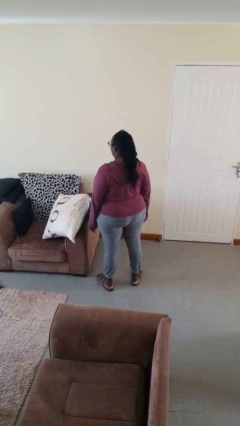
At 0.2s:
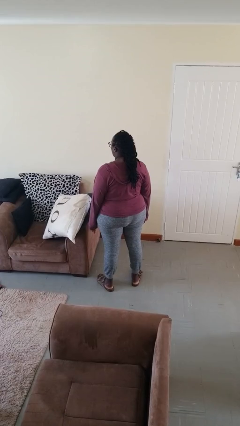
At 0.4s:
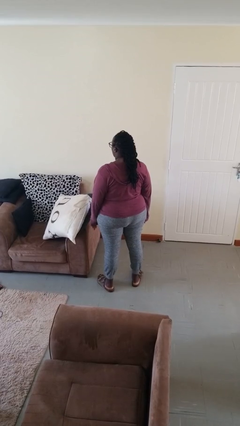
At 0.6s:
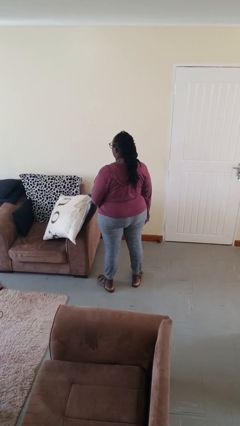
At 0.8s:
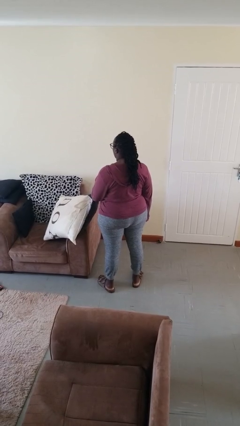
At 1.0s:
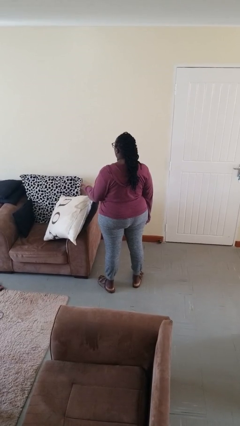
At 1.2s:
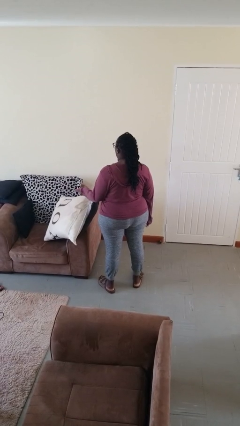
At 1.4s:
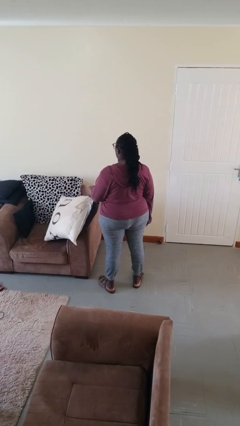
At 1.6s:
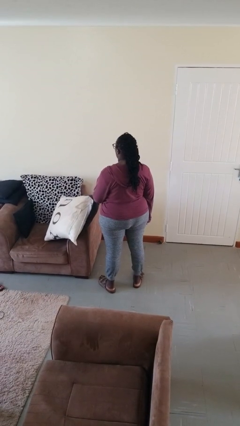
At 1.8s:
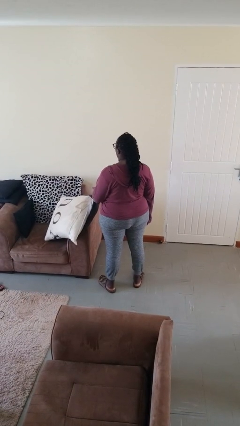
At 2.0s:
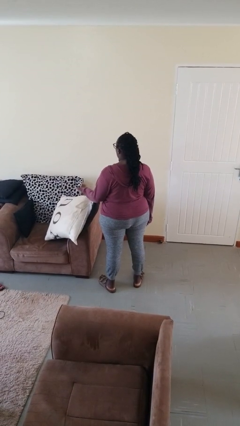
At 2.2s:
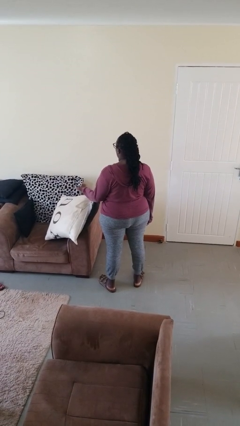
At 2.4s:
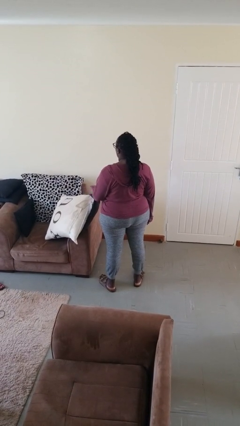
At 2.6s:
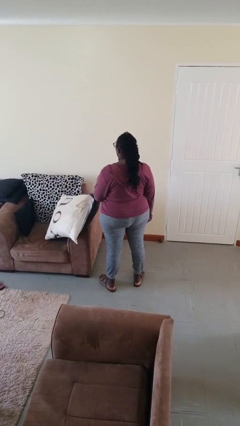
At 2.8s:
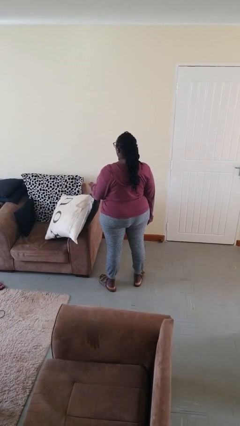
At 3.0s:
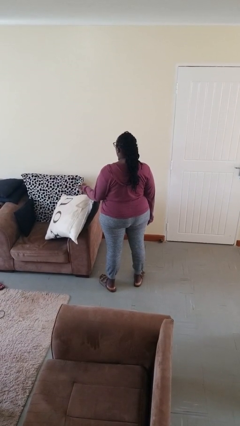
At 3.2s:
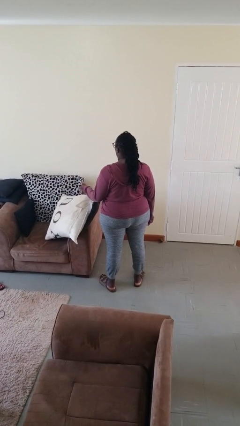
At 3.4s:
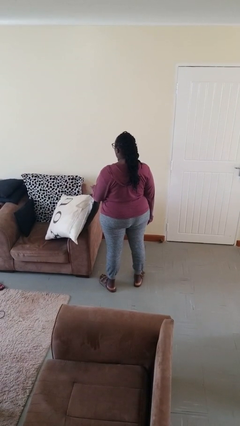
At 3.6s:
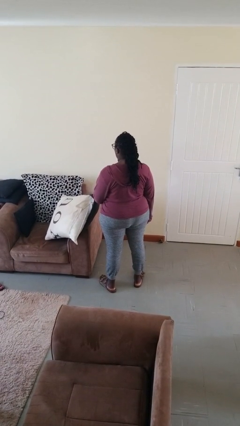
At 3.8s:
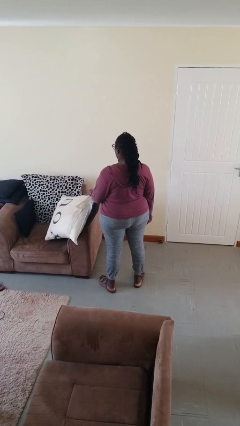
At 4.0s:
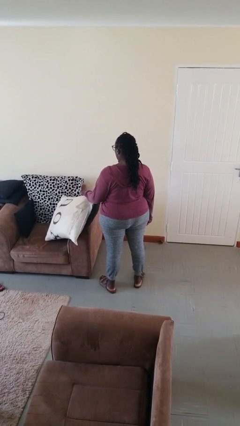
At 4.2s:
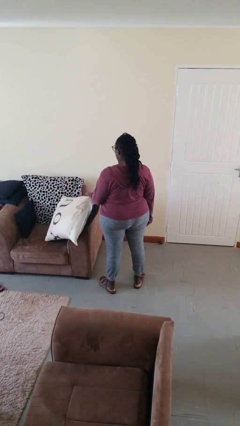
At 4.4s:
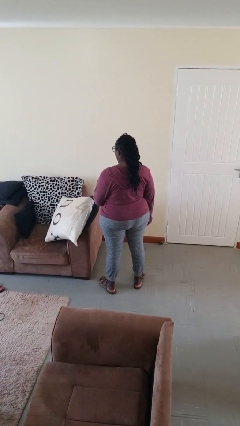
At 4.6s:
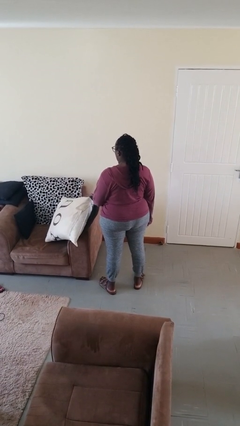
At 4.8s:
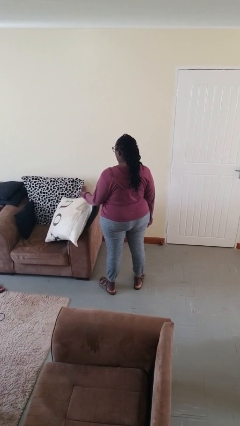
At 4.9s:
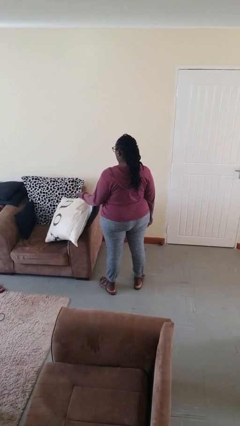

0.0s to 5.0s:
person waves hand over object

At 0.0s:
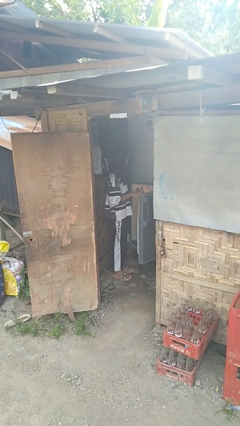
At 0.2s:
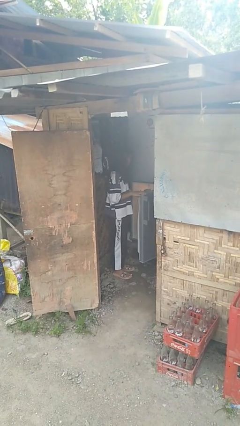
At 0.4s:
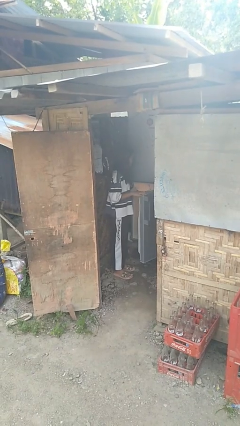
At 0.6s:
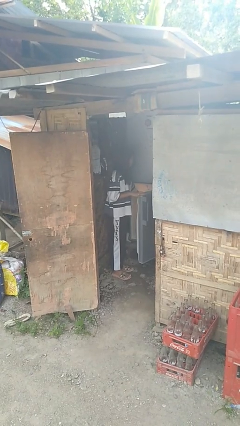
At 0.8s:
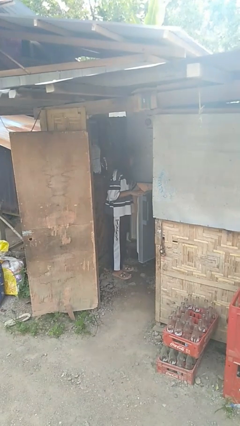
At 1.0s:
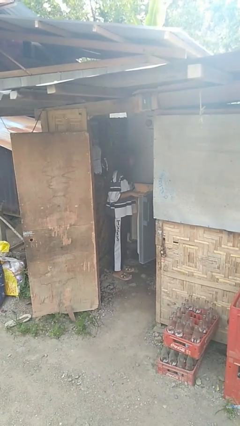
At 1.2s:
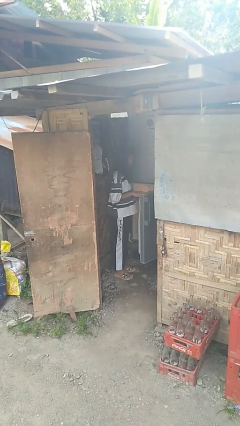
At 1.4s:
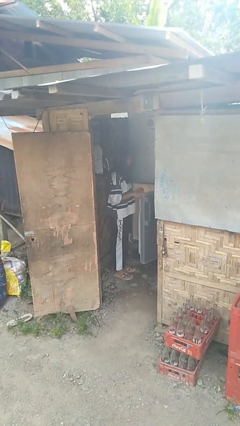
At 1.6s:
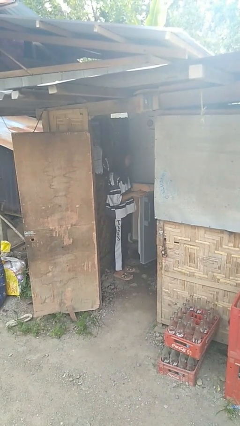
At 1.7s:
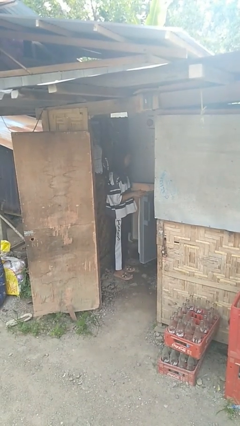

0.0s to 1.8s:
person puts object into refrigerator

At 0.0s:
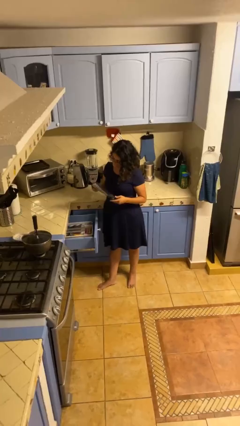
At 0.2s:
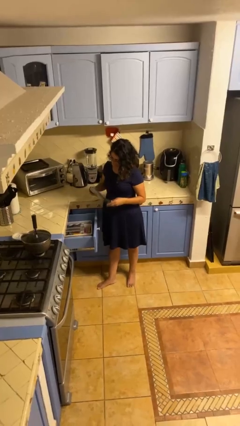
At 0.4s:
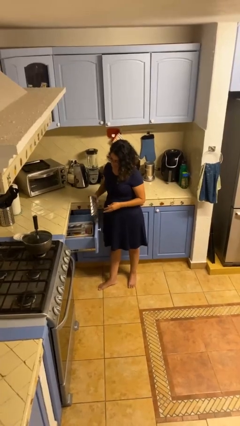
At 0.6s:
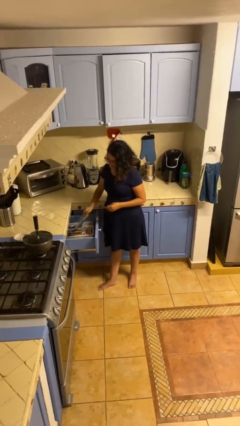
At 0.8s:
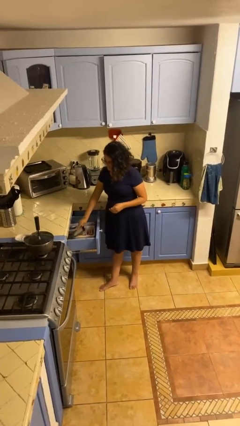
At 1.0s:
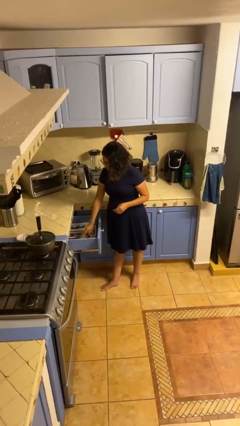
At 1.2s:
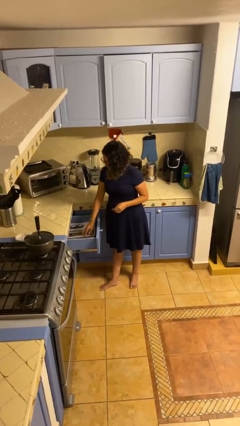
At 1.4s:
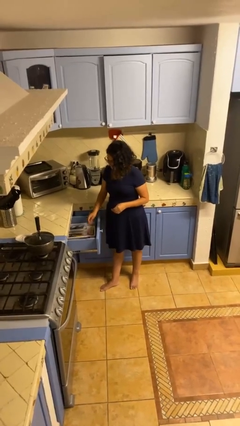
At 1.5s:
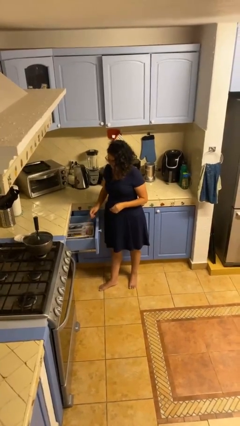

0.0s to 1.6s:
person puts object into kitchen drawer

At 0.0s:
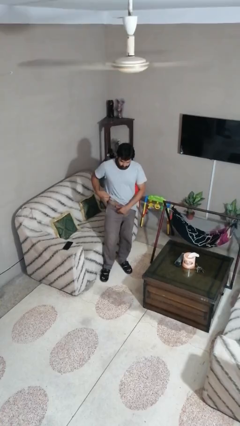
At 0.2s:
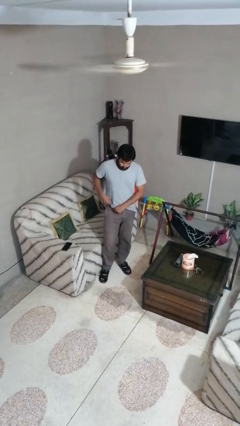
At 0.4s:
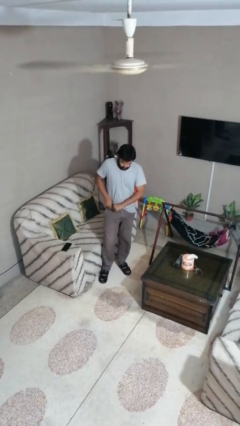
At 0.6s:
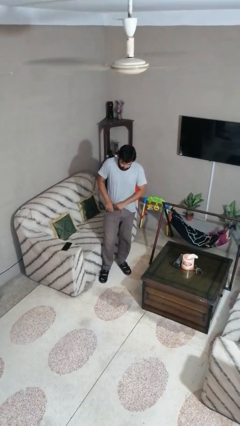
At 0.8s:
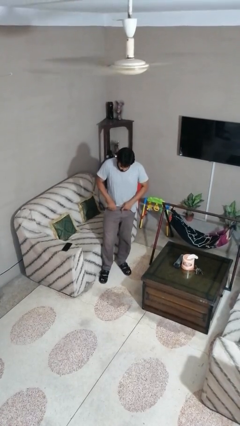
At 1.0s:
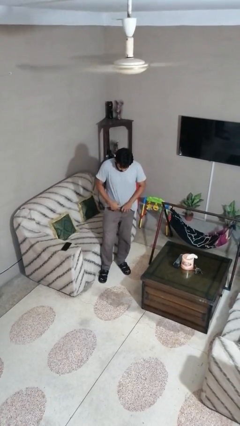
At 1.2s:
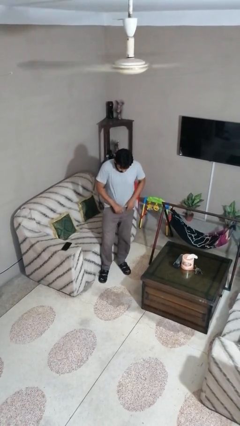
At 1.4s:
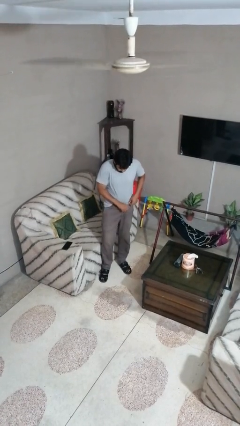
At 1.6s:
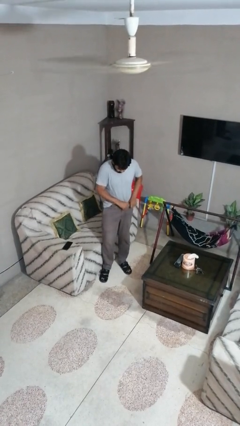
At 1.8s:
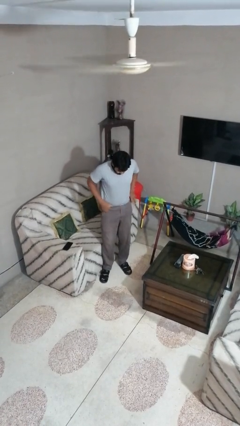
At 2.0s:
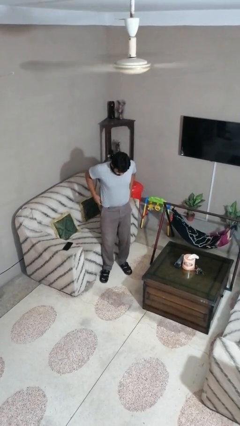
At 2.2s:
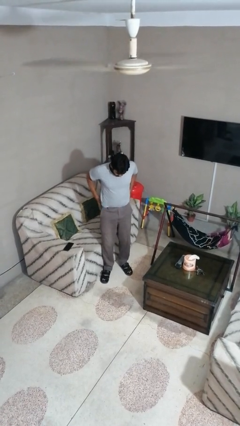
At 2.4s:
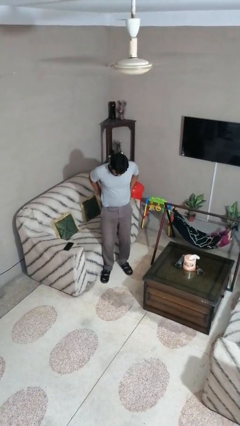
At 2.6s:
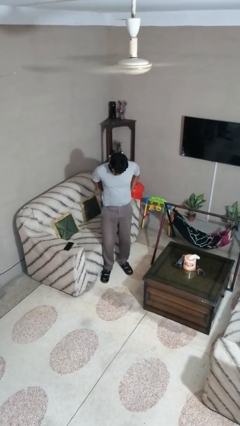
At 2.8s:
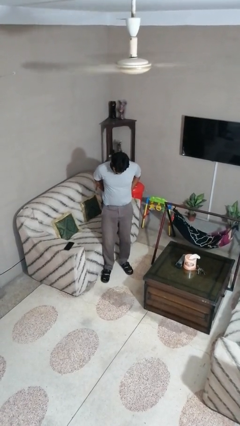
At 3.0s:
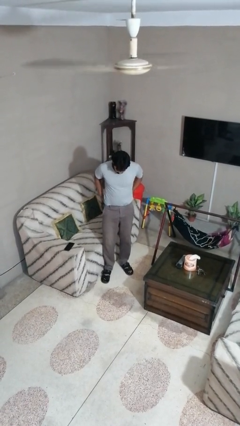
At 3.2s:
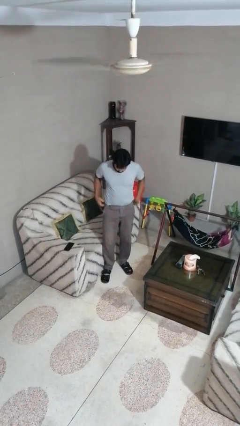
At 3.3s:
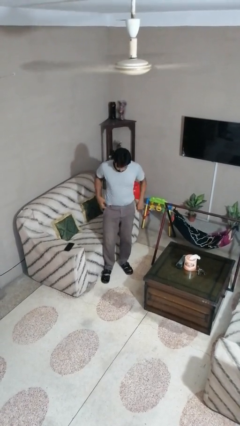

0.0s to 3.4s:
person tucks in shirt

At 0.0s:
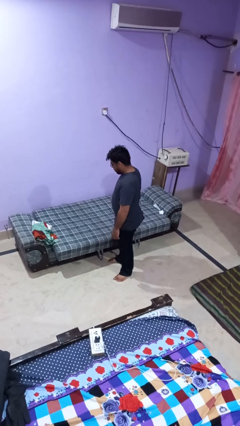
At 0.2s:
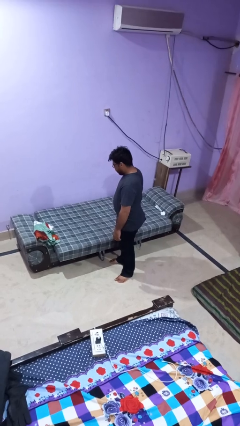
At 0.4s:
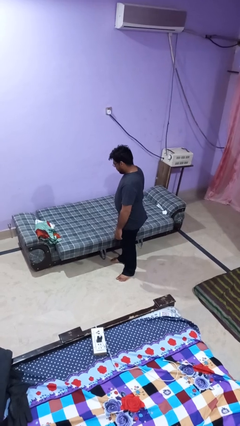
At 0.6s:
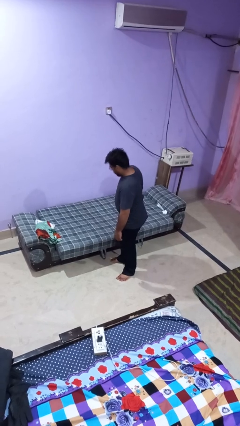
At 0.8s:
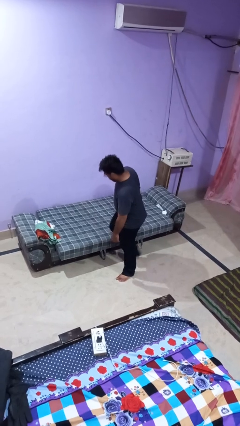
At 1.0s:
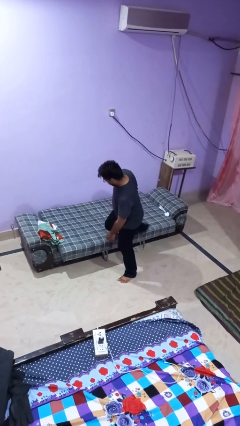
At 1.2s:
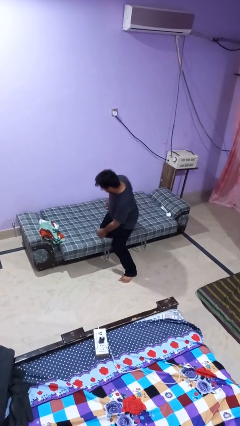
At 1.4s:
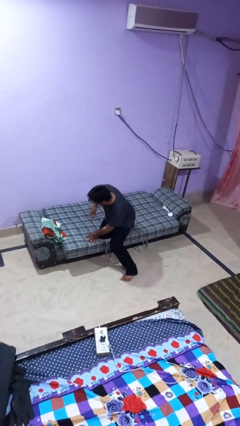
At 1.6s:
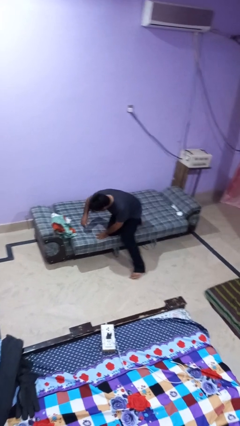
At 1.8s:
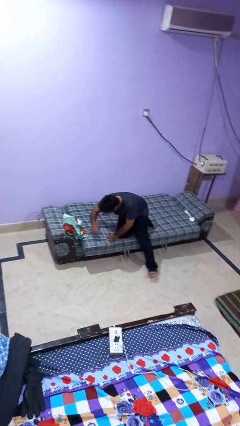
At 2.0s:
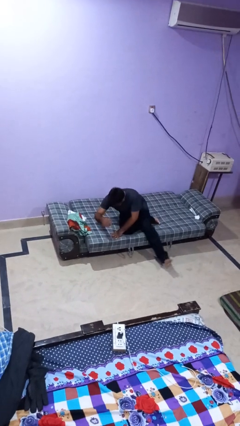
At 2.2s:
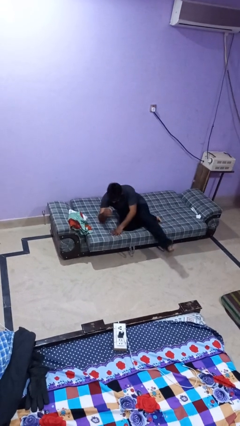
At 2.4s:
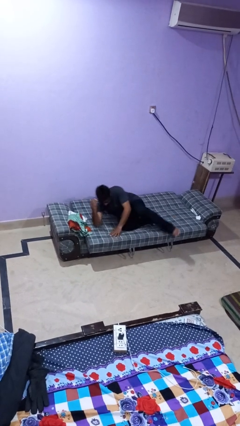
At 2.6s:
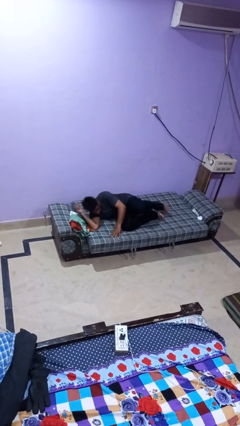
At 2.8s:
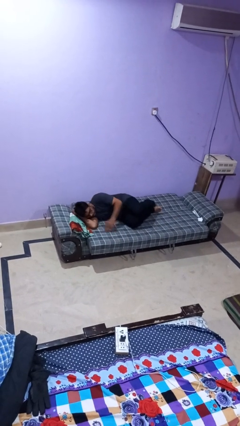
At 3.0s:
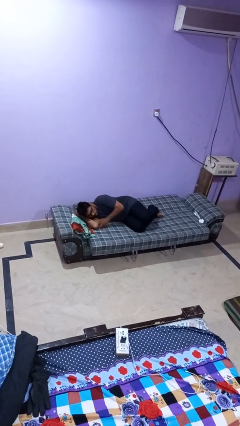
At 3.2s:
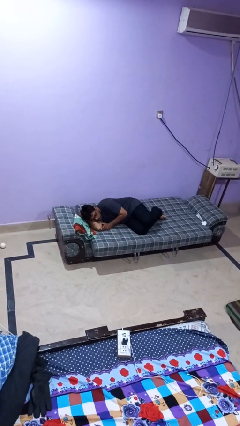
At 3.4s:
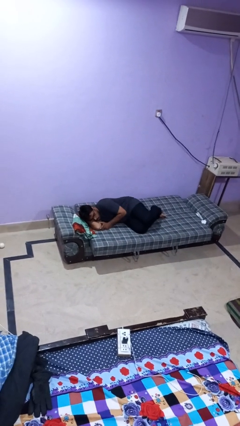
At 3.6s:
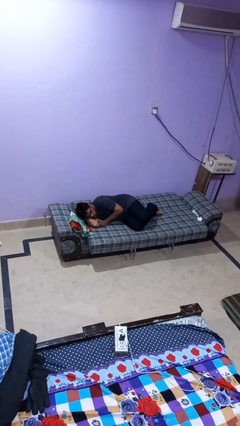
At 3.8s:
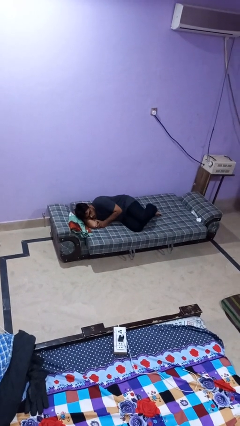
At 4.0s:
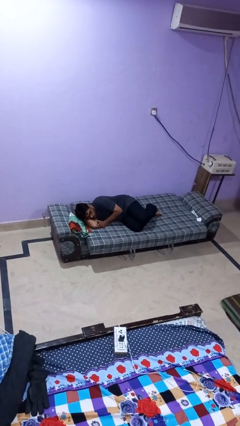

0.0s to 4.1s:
person lies down on bed

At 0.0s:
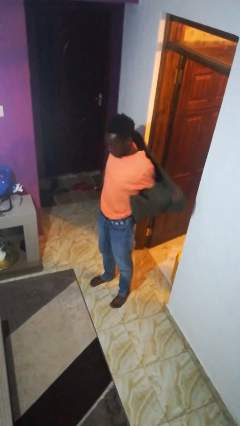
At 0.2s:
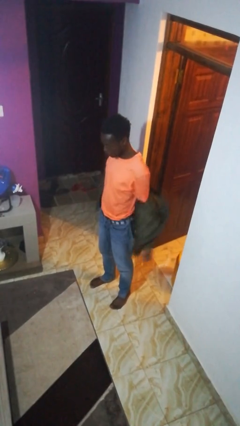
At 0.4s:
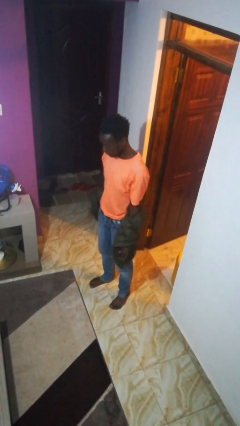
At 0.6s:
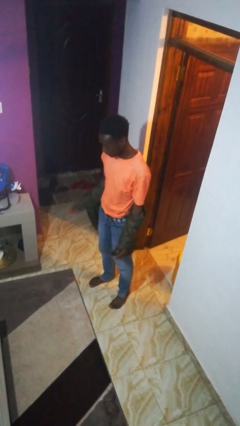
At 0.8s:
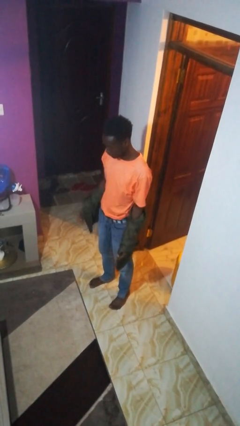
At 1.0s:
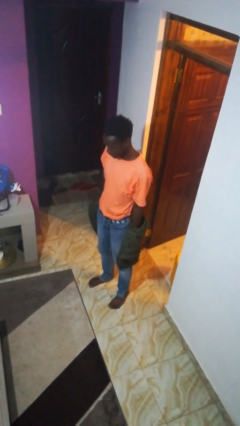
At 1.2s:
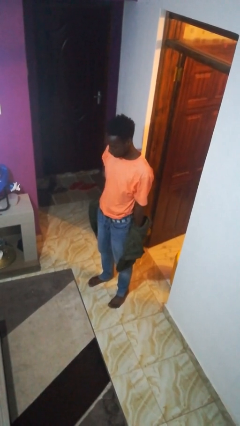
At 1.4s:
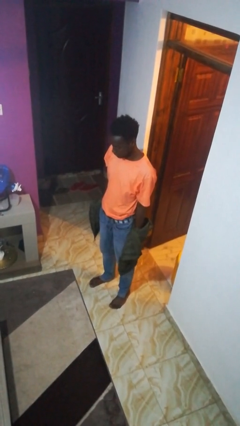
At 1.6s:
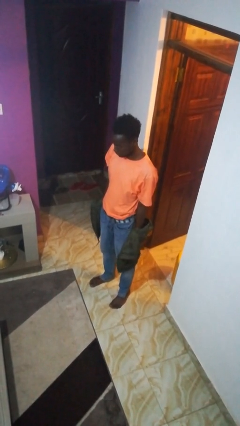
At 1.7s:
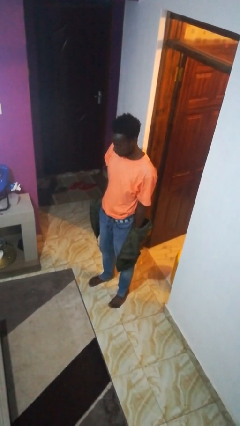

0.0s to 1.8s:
person takes off jacket

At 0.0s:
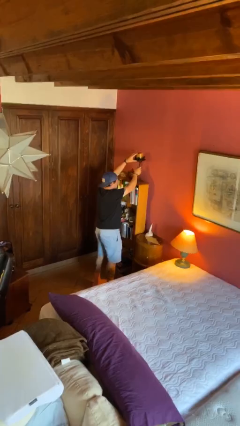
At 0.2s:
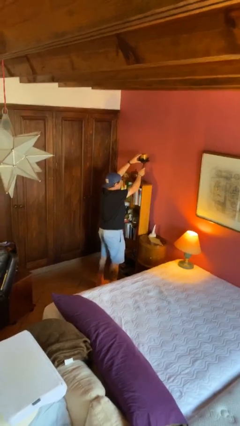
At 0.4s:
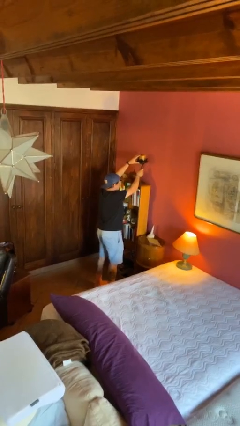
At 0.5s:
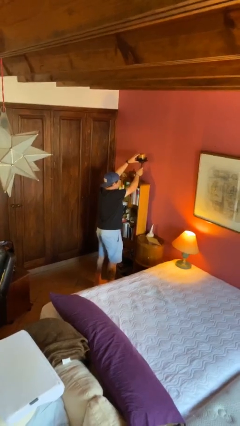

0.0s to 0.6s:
person puts down object on shelf
